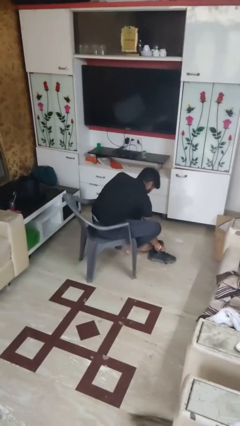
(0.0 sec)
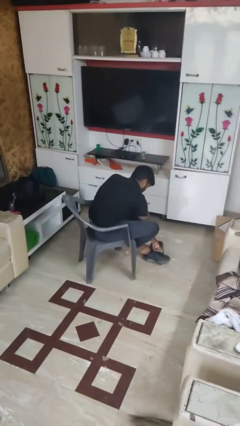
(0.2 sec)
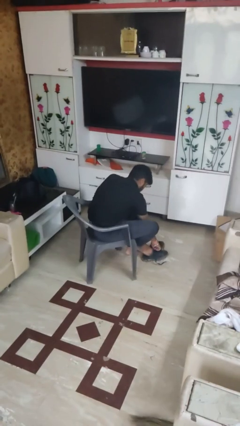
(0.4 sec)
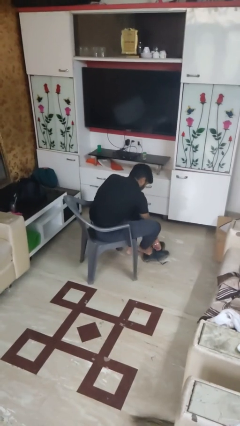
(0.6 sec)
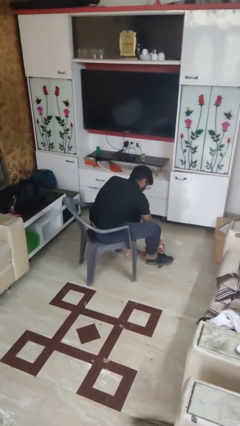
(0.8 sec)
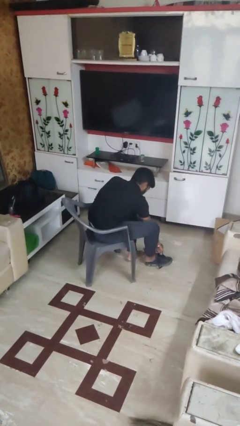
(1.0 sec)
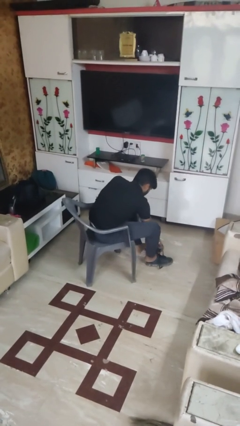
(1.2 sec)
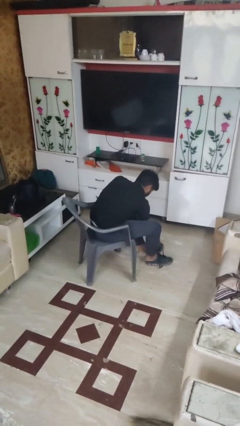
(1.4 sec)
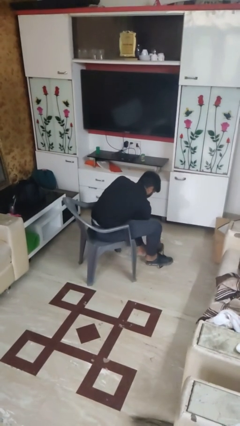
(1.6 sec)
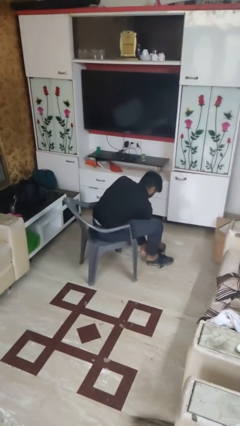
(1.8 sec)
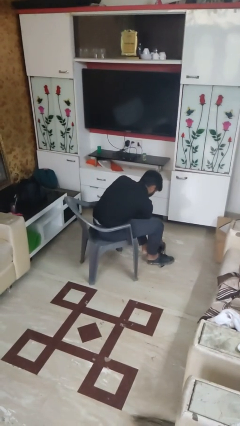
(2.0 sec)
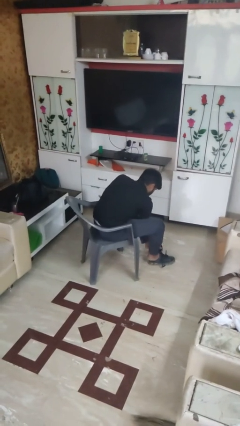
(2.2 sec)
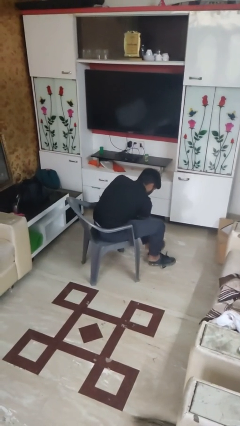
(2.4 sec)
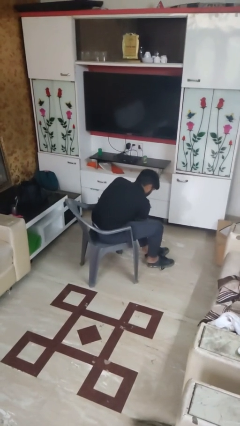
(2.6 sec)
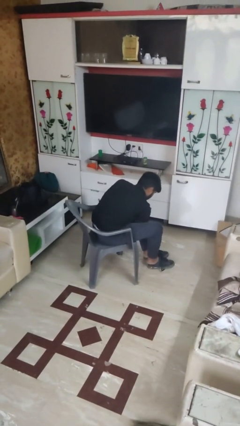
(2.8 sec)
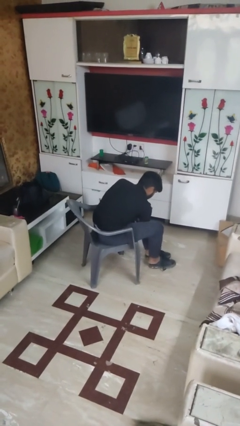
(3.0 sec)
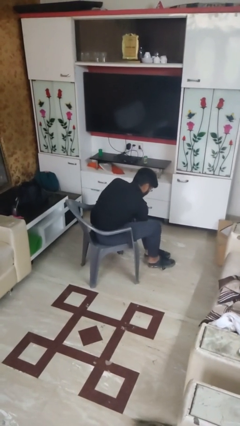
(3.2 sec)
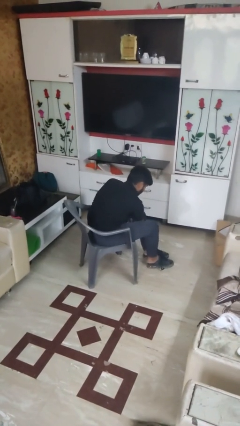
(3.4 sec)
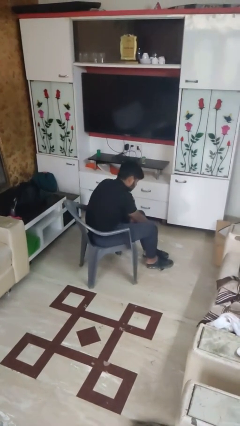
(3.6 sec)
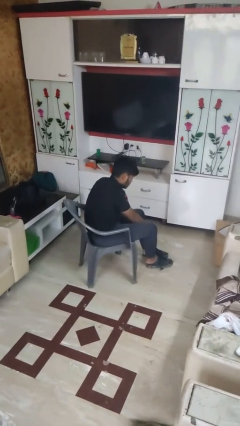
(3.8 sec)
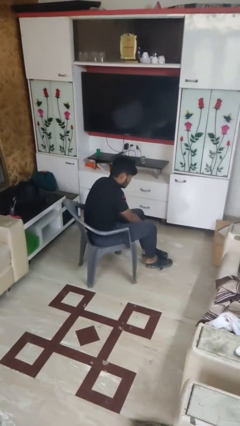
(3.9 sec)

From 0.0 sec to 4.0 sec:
person puts on shoes

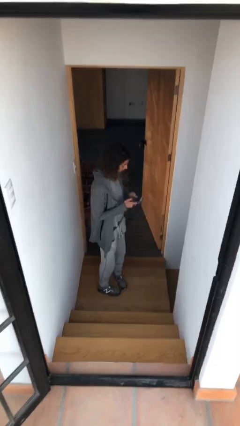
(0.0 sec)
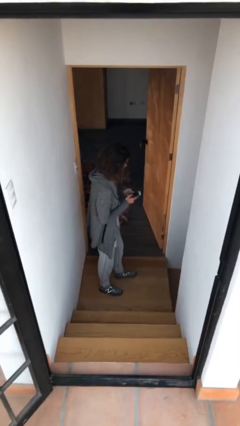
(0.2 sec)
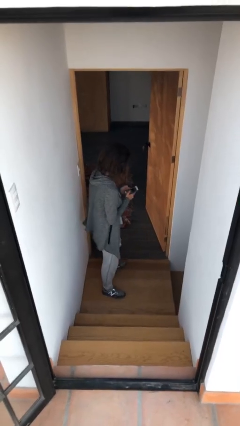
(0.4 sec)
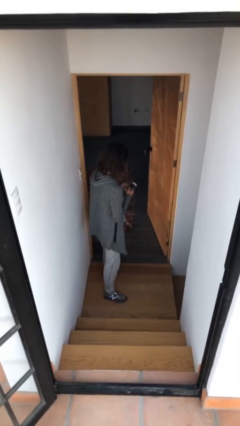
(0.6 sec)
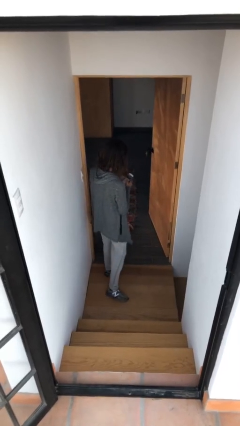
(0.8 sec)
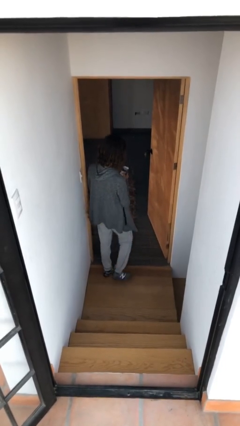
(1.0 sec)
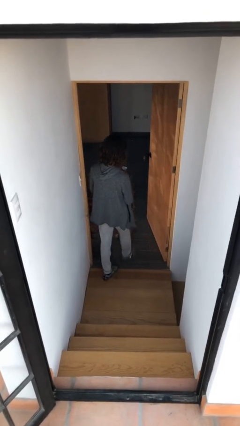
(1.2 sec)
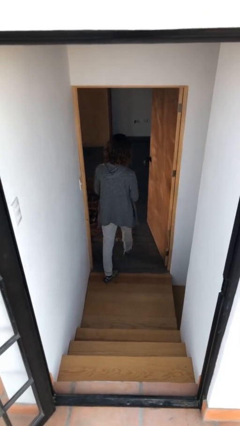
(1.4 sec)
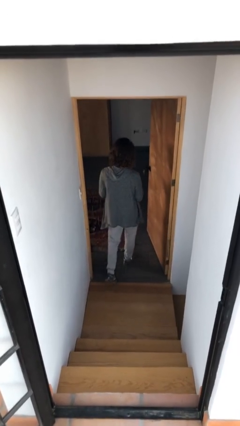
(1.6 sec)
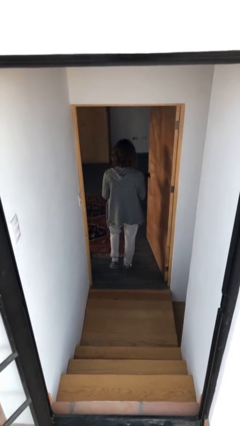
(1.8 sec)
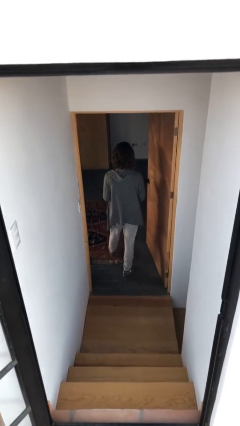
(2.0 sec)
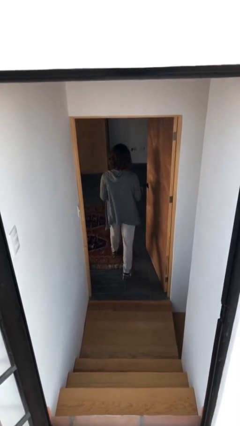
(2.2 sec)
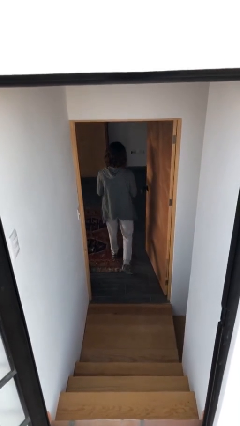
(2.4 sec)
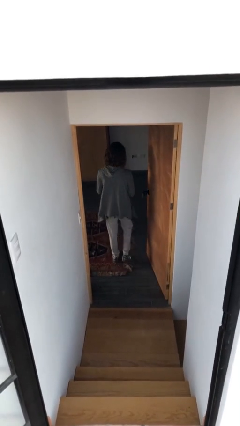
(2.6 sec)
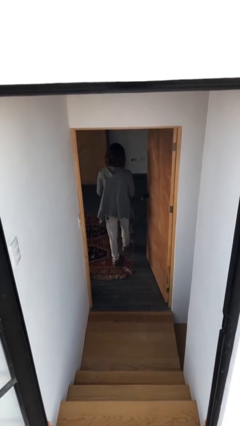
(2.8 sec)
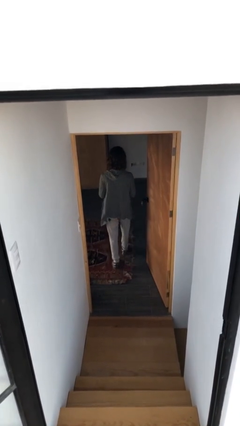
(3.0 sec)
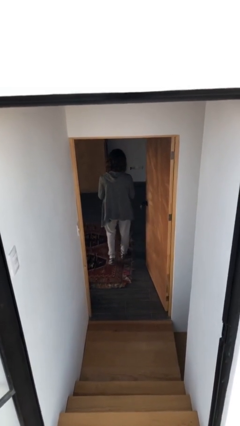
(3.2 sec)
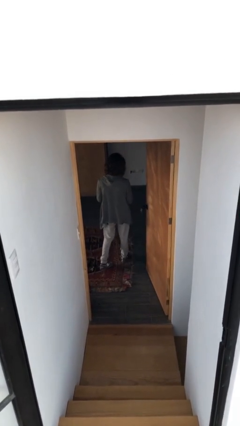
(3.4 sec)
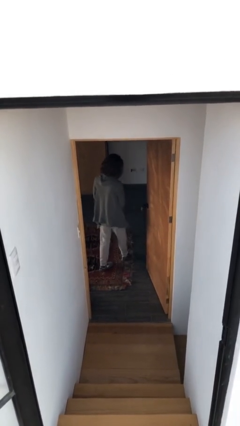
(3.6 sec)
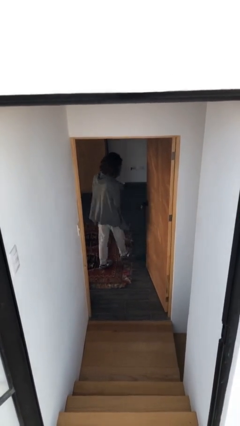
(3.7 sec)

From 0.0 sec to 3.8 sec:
person exits scene through structure

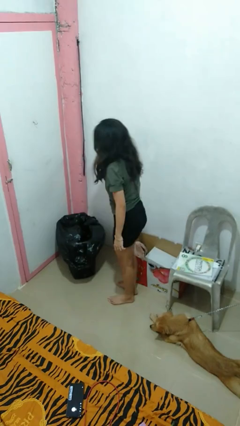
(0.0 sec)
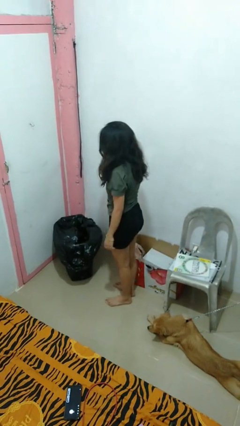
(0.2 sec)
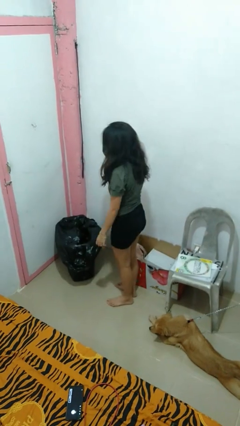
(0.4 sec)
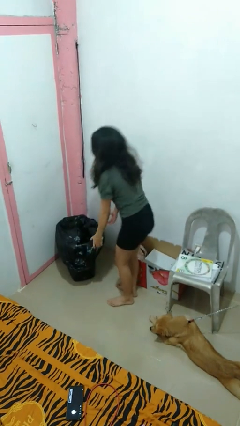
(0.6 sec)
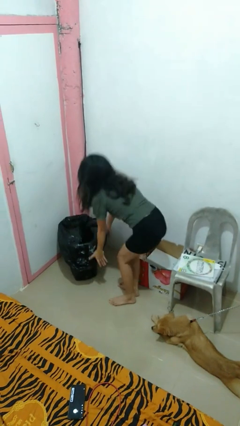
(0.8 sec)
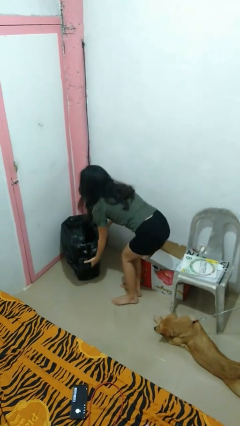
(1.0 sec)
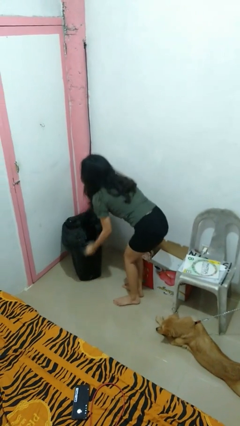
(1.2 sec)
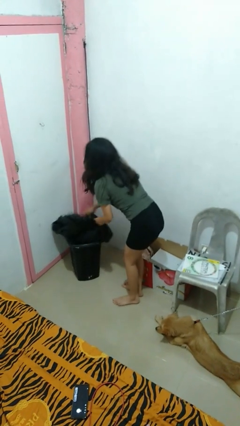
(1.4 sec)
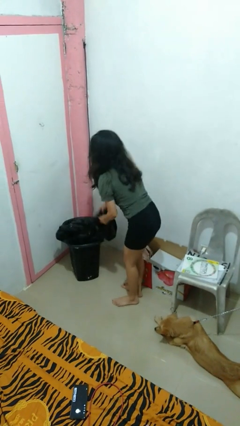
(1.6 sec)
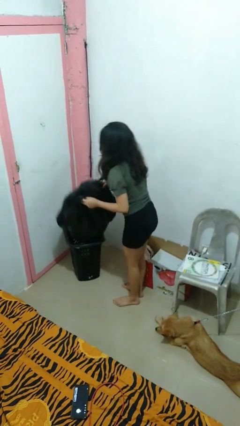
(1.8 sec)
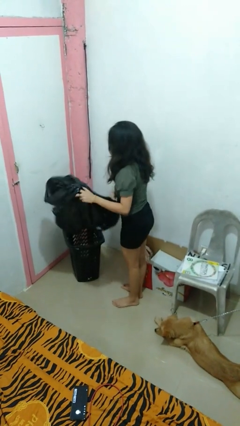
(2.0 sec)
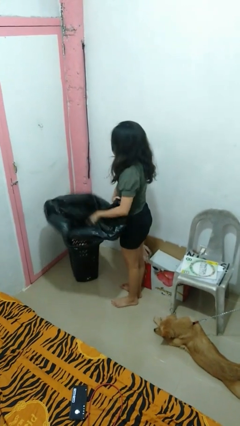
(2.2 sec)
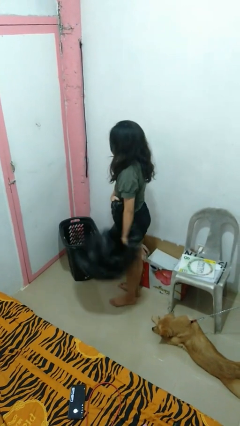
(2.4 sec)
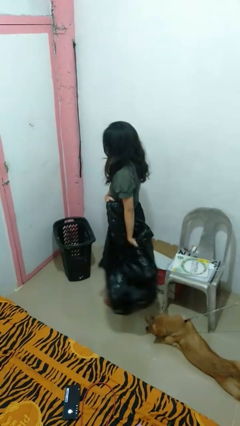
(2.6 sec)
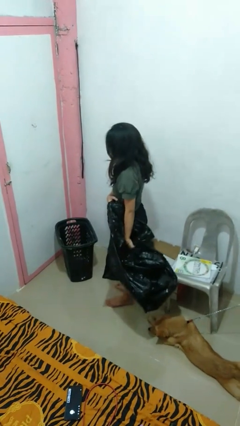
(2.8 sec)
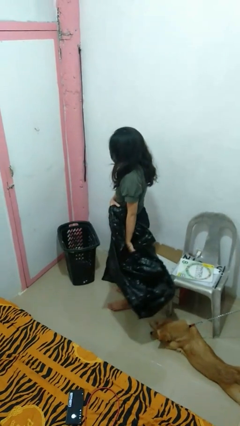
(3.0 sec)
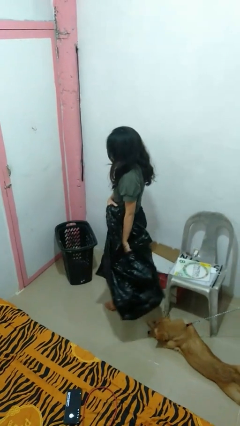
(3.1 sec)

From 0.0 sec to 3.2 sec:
person removes trashbag from trashcan

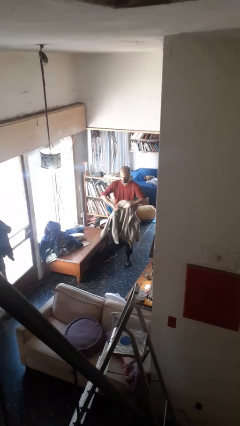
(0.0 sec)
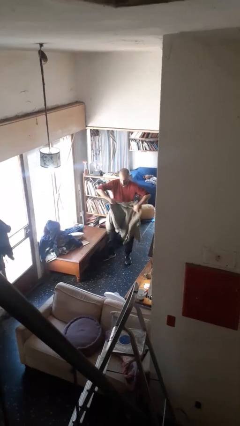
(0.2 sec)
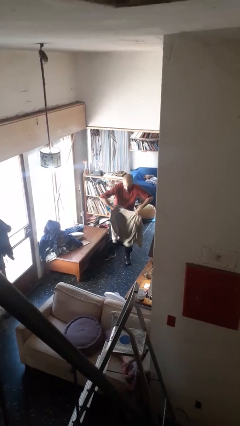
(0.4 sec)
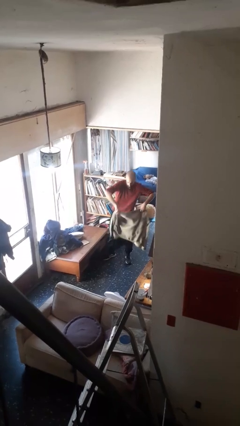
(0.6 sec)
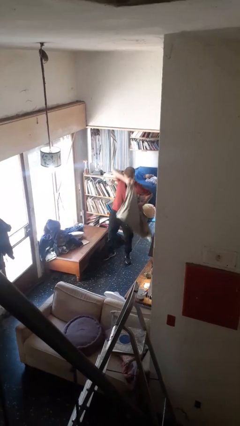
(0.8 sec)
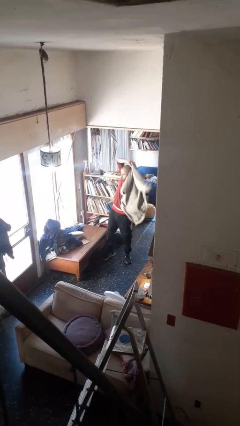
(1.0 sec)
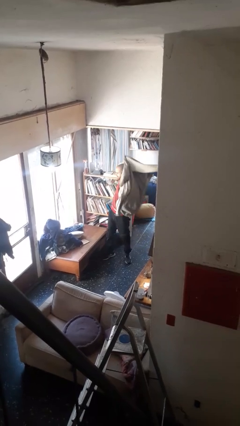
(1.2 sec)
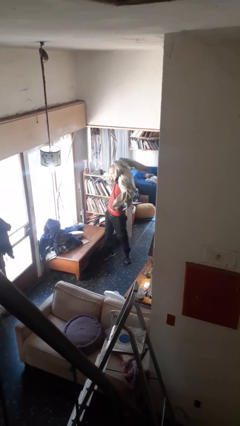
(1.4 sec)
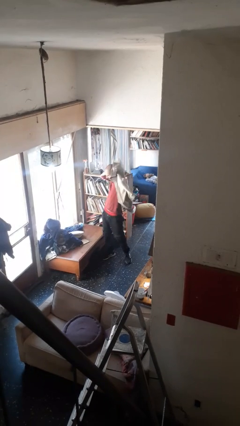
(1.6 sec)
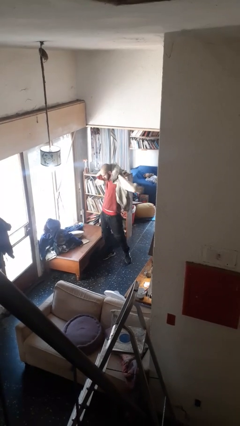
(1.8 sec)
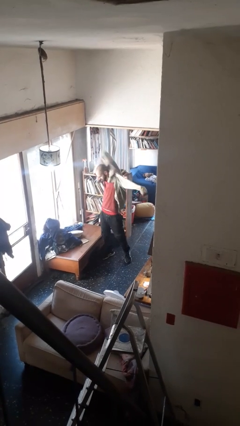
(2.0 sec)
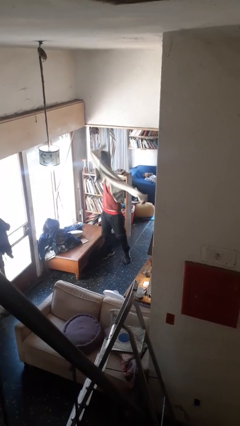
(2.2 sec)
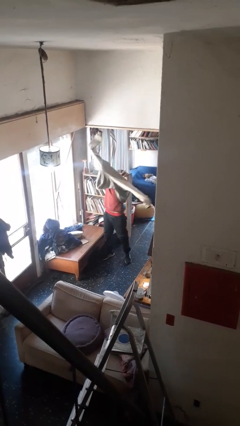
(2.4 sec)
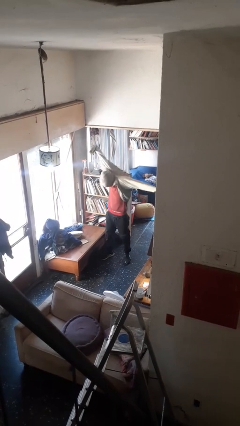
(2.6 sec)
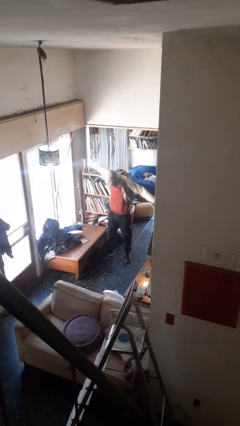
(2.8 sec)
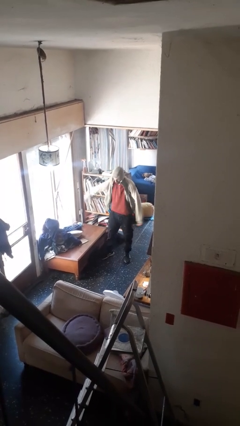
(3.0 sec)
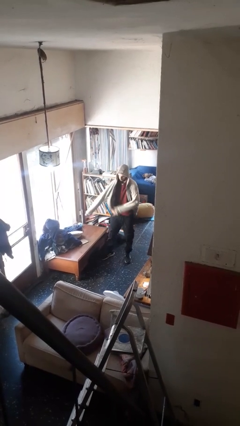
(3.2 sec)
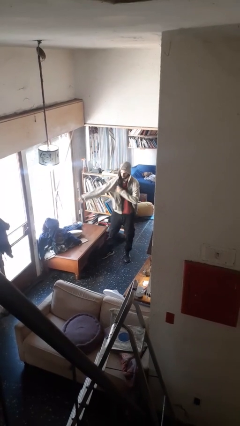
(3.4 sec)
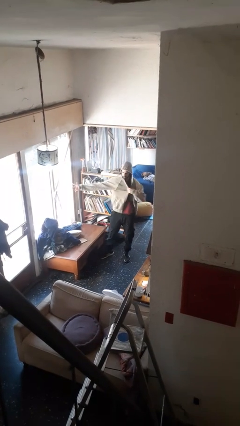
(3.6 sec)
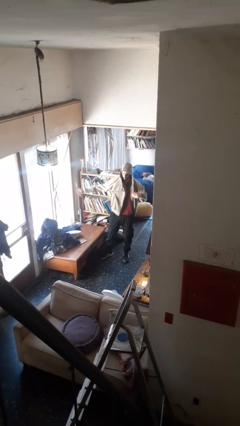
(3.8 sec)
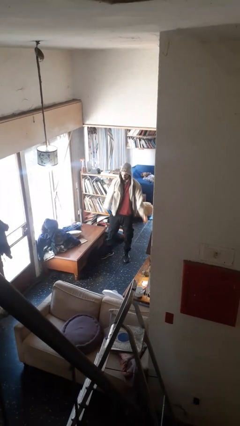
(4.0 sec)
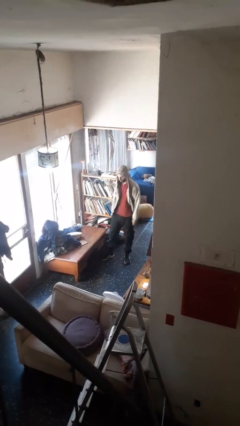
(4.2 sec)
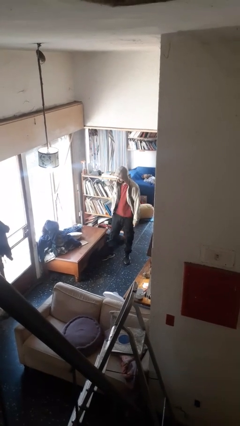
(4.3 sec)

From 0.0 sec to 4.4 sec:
person puts on hoodie

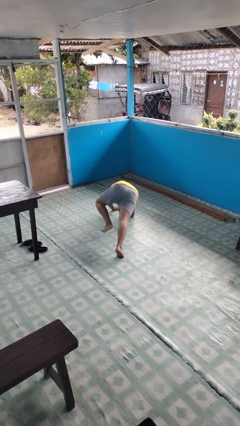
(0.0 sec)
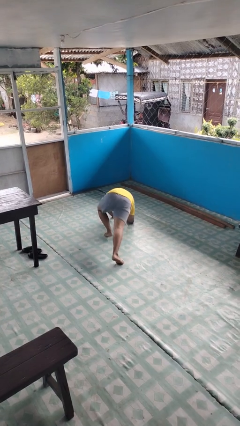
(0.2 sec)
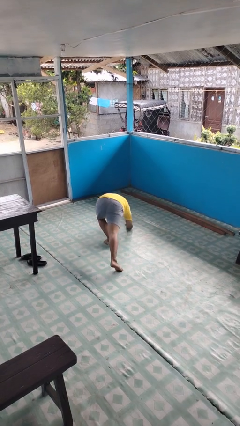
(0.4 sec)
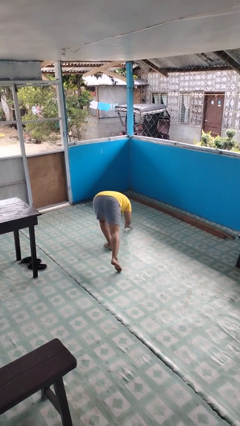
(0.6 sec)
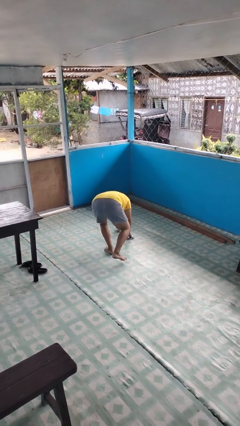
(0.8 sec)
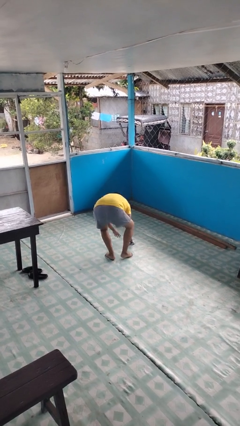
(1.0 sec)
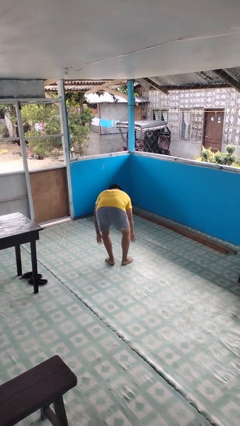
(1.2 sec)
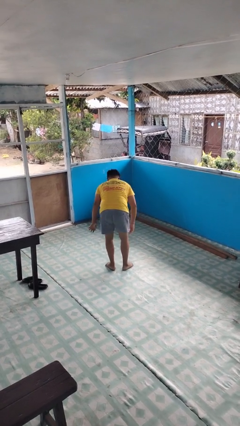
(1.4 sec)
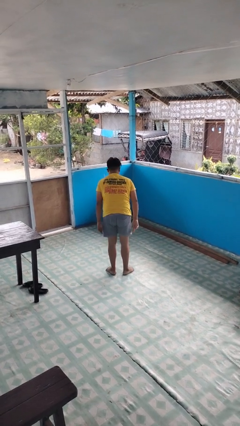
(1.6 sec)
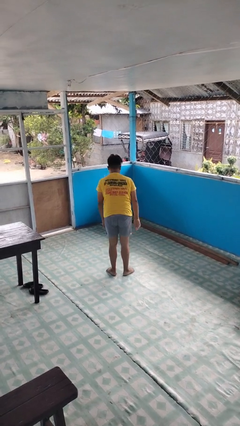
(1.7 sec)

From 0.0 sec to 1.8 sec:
person stands up from floor
